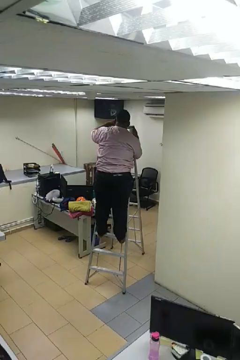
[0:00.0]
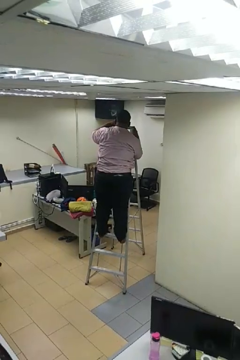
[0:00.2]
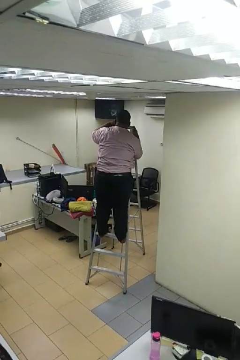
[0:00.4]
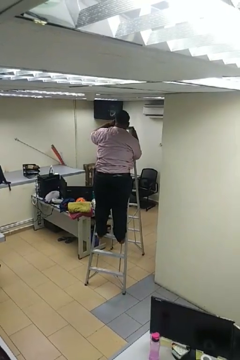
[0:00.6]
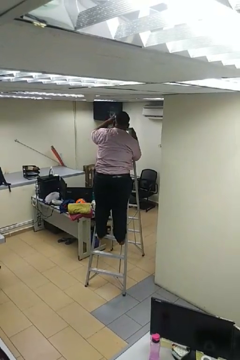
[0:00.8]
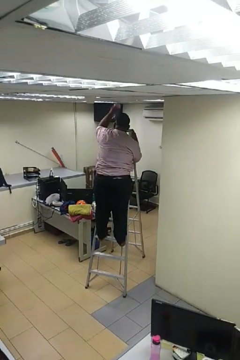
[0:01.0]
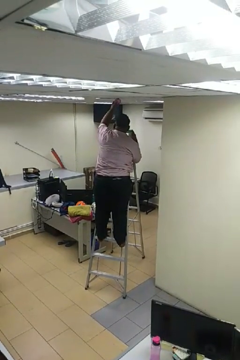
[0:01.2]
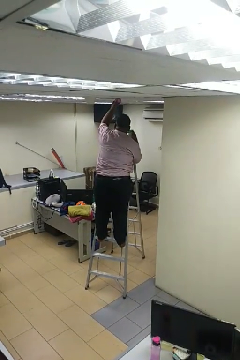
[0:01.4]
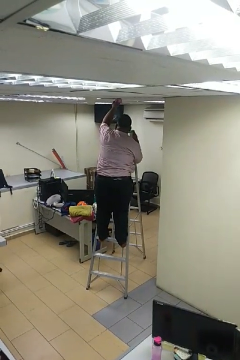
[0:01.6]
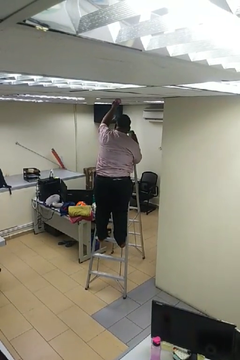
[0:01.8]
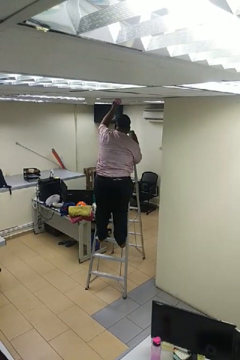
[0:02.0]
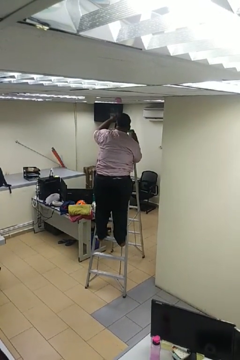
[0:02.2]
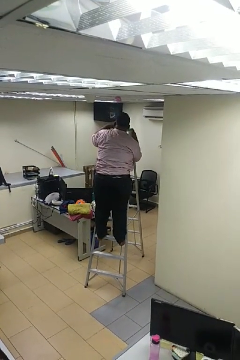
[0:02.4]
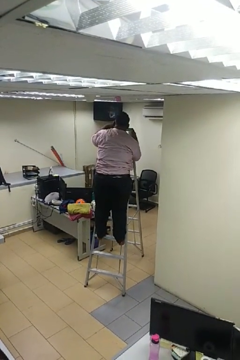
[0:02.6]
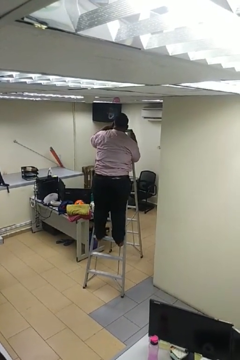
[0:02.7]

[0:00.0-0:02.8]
person puts up smoke detector

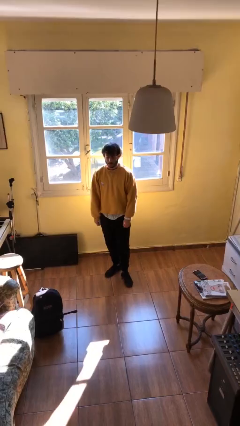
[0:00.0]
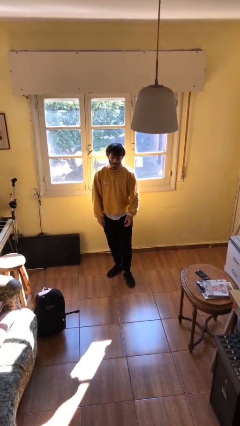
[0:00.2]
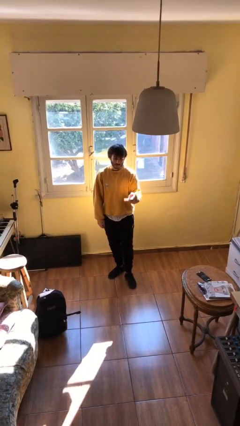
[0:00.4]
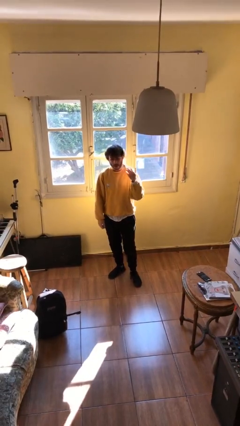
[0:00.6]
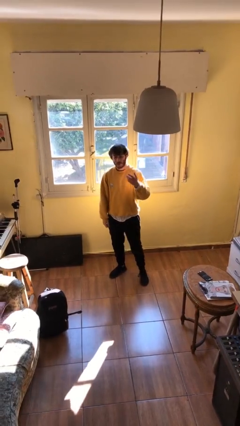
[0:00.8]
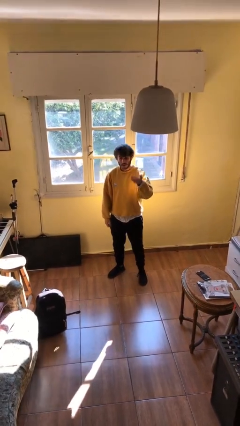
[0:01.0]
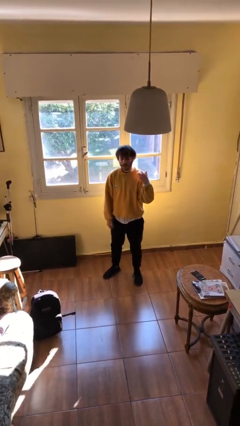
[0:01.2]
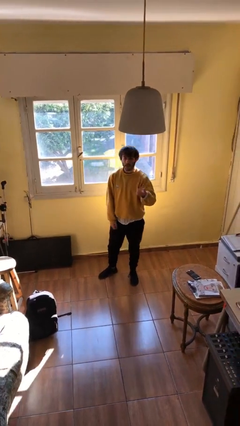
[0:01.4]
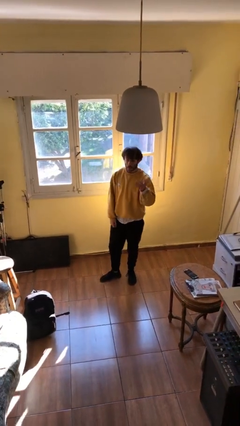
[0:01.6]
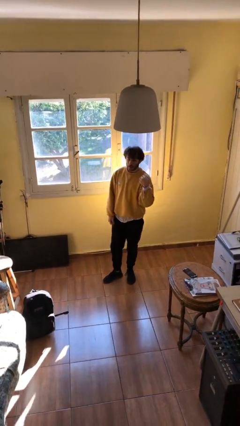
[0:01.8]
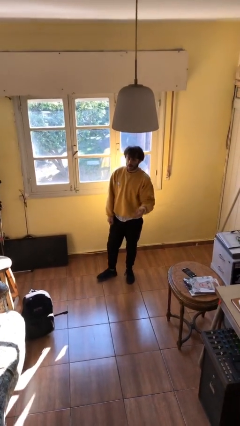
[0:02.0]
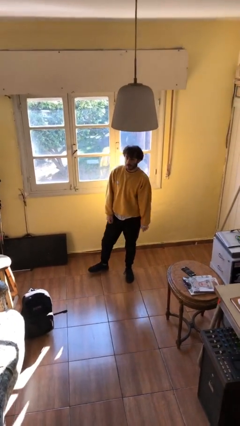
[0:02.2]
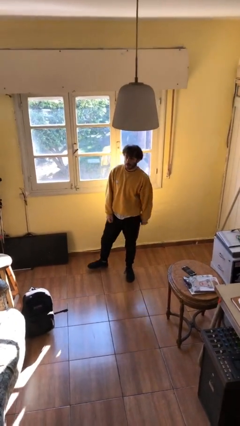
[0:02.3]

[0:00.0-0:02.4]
person gestures come here

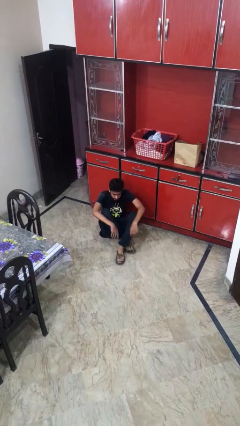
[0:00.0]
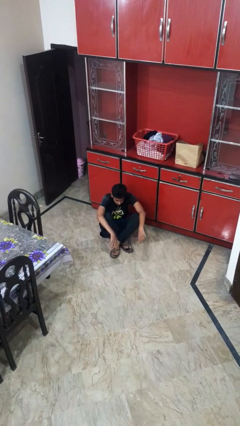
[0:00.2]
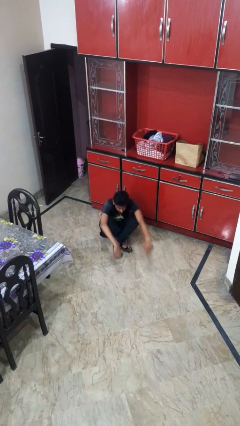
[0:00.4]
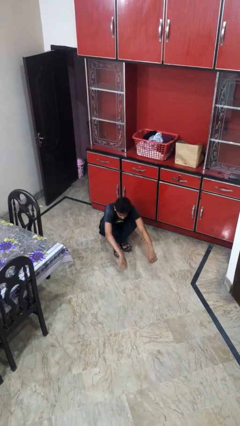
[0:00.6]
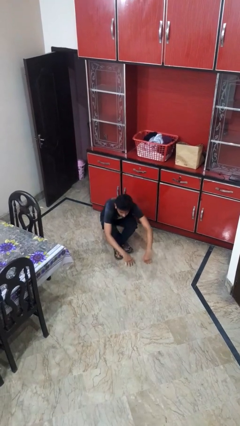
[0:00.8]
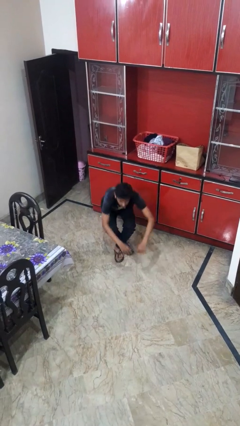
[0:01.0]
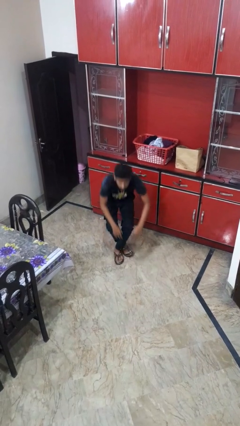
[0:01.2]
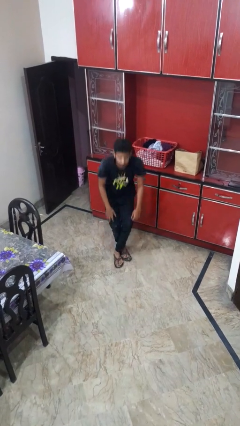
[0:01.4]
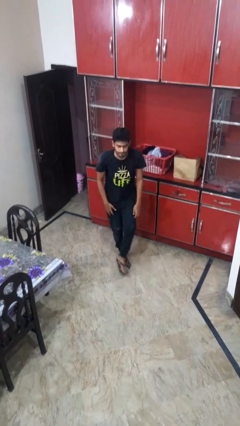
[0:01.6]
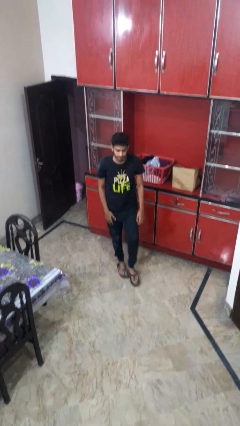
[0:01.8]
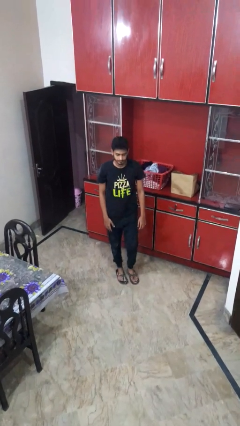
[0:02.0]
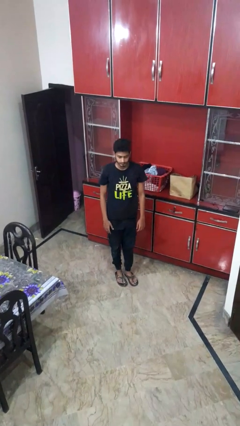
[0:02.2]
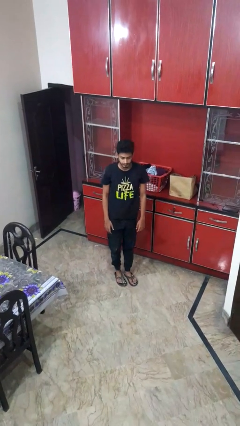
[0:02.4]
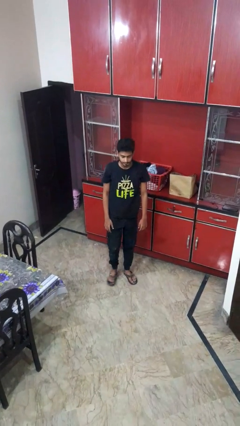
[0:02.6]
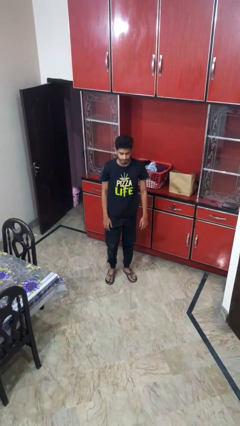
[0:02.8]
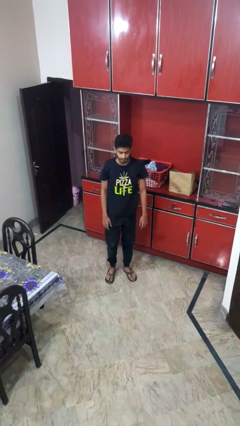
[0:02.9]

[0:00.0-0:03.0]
person stands up from floor

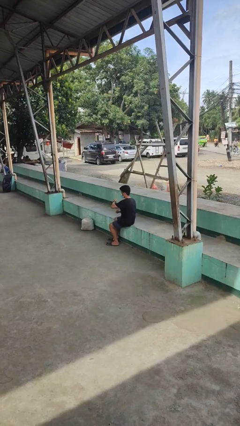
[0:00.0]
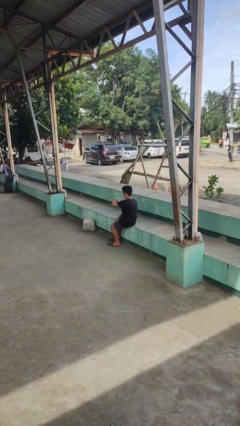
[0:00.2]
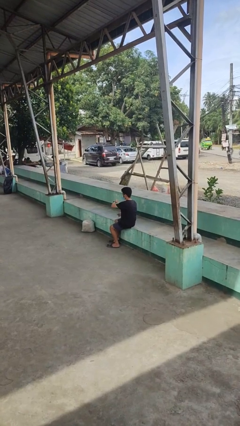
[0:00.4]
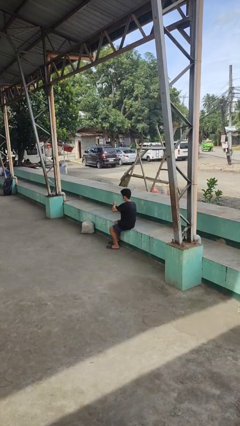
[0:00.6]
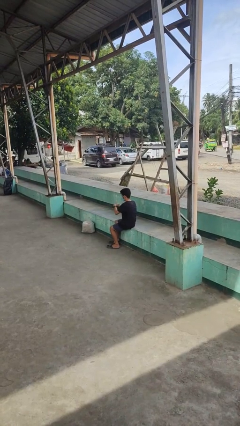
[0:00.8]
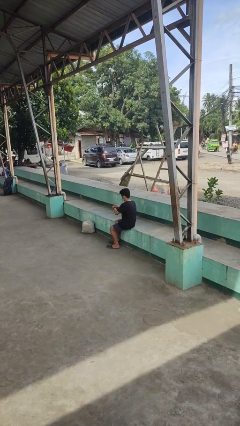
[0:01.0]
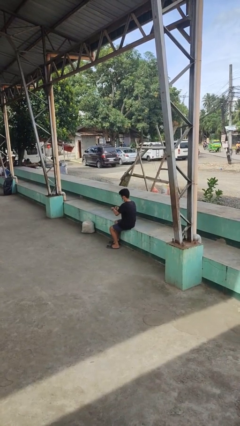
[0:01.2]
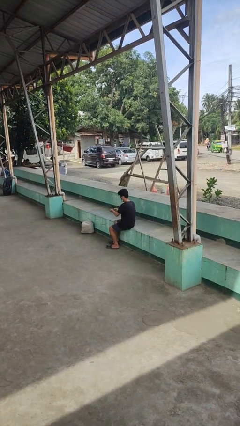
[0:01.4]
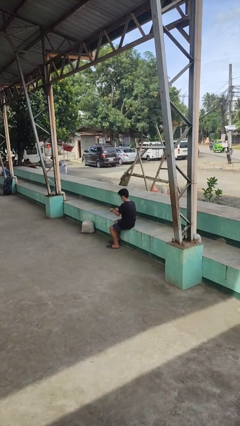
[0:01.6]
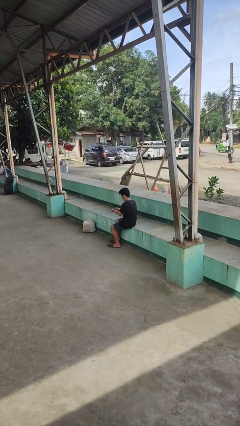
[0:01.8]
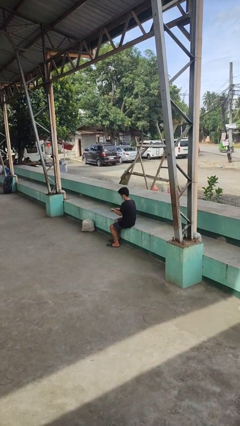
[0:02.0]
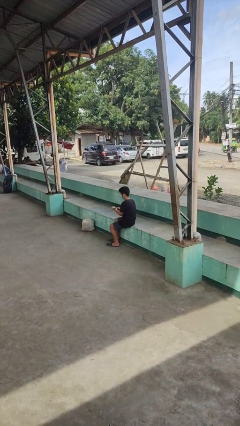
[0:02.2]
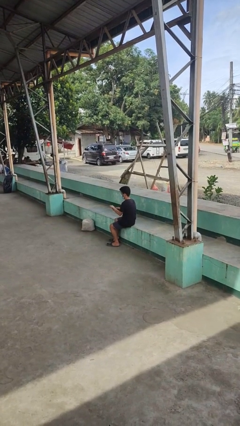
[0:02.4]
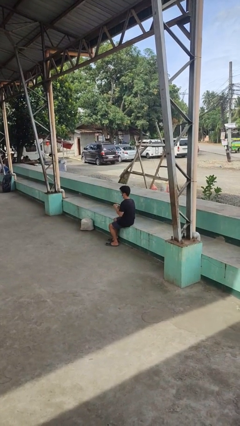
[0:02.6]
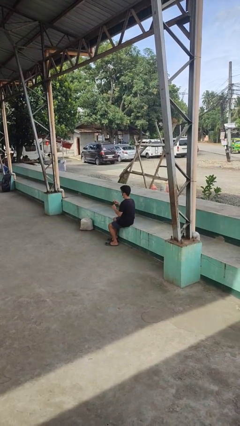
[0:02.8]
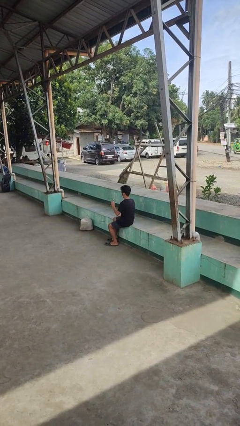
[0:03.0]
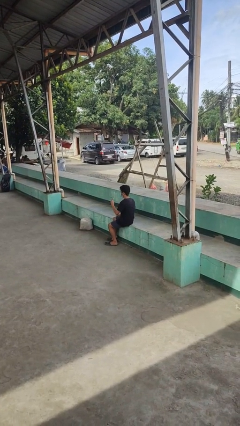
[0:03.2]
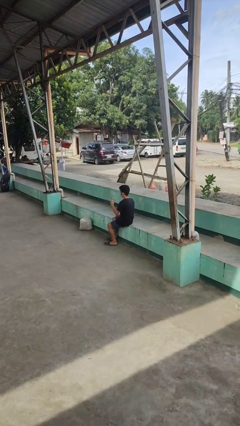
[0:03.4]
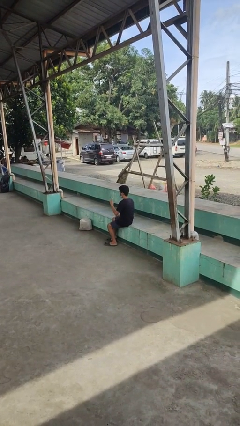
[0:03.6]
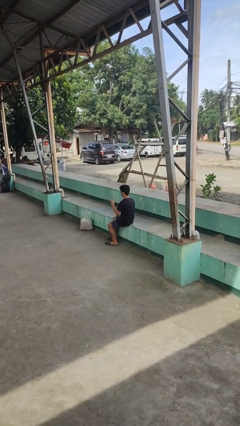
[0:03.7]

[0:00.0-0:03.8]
person takes off wristwatch

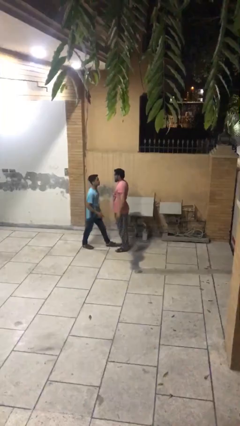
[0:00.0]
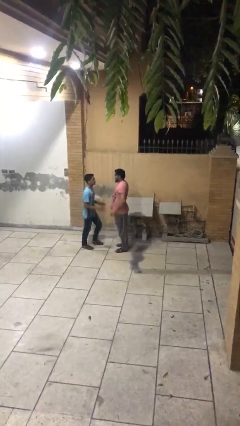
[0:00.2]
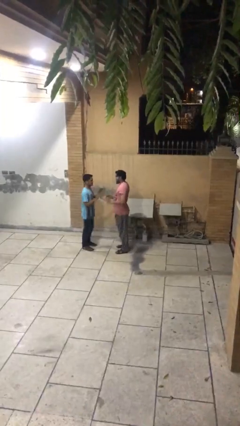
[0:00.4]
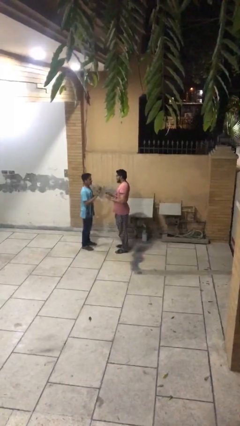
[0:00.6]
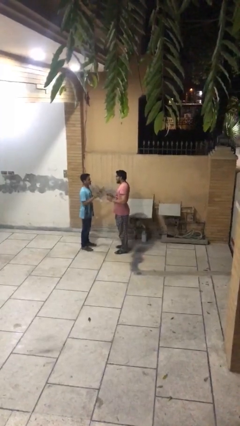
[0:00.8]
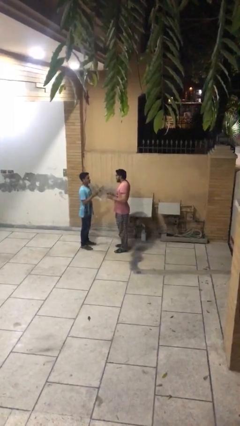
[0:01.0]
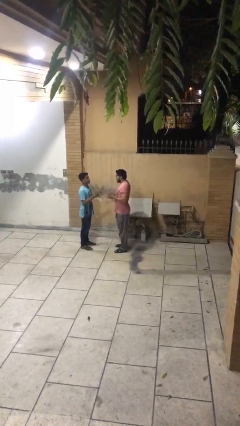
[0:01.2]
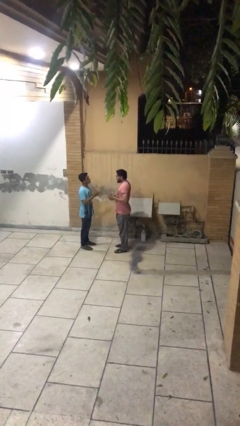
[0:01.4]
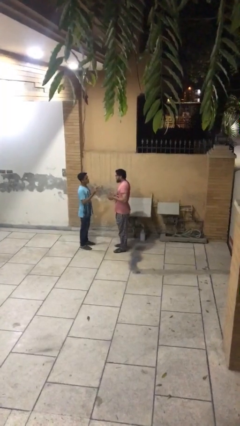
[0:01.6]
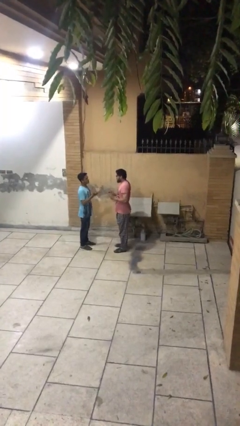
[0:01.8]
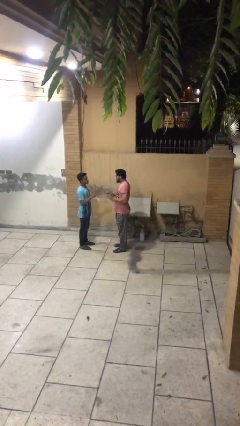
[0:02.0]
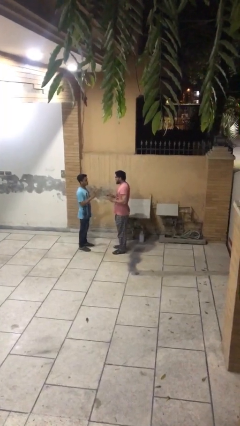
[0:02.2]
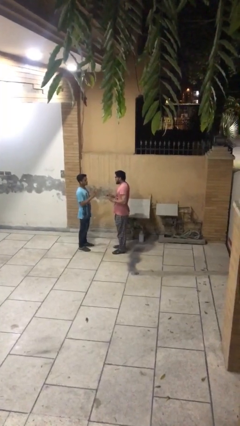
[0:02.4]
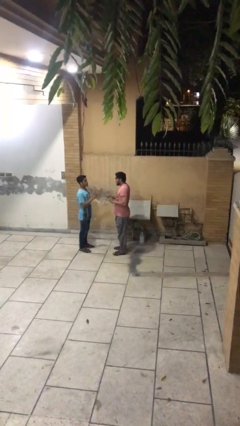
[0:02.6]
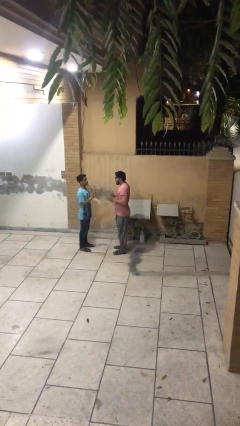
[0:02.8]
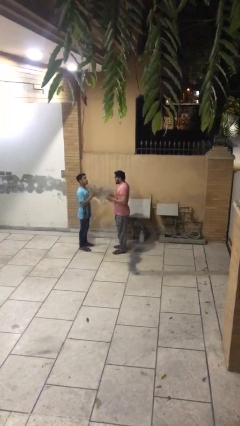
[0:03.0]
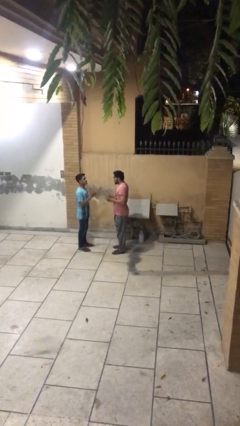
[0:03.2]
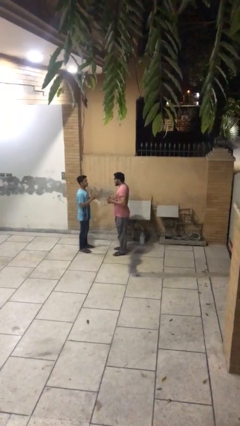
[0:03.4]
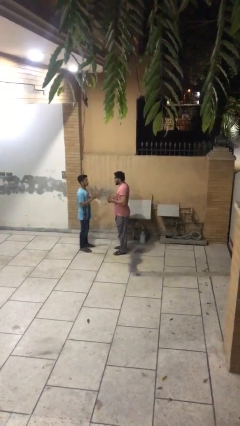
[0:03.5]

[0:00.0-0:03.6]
person talks to person

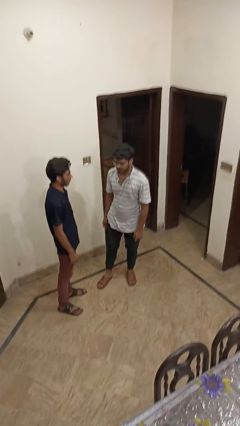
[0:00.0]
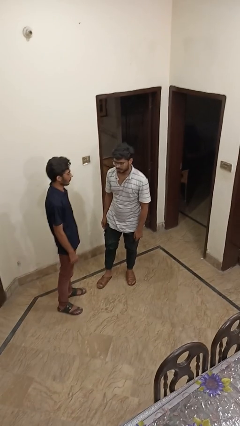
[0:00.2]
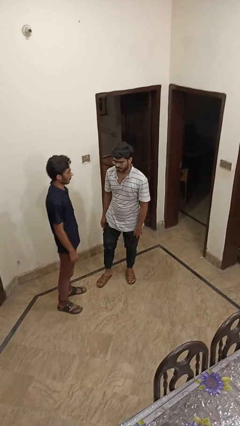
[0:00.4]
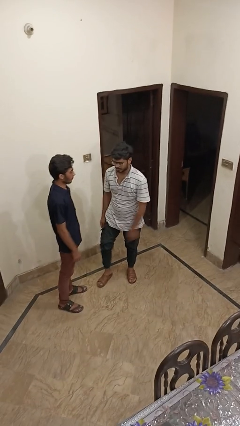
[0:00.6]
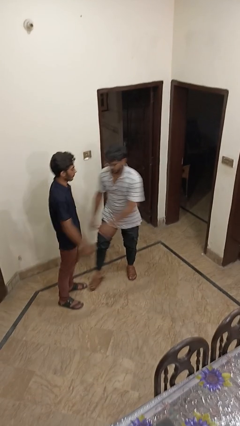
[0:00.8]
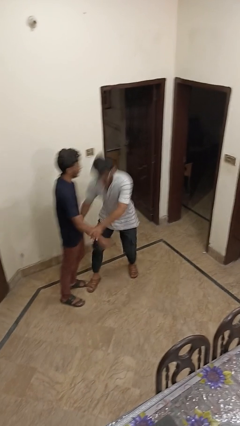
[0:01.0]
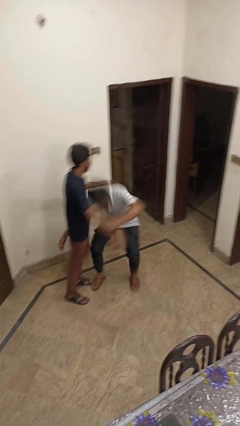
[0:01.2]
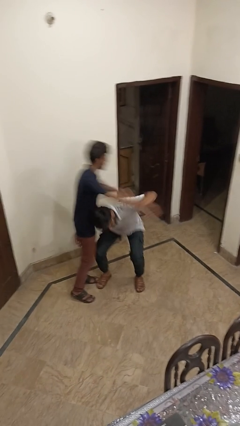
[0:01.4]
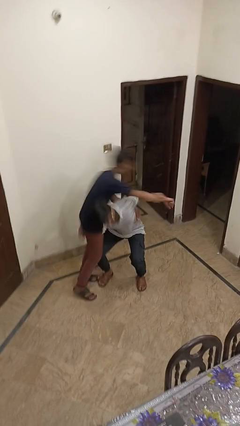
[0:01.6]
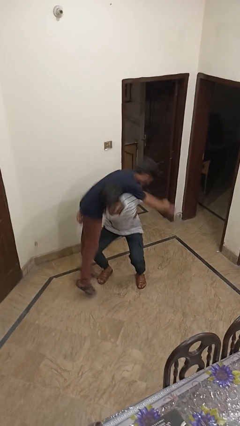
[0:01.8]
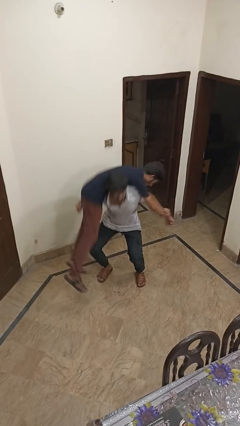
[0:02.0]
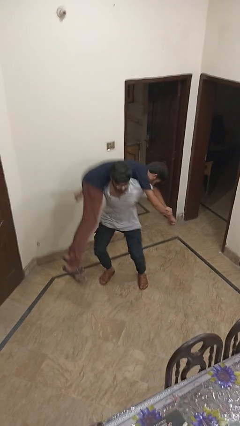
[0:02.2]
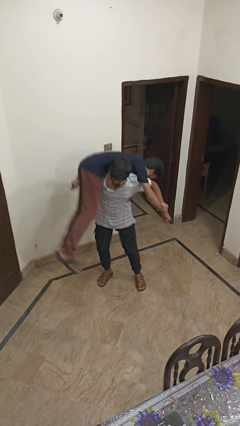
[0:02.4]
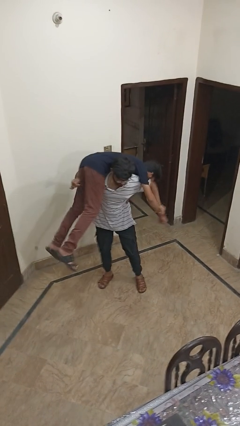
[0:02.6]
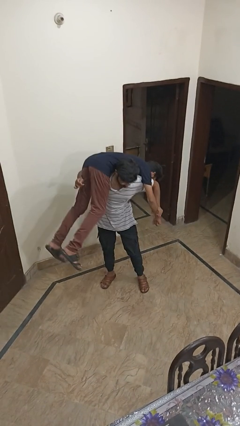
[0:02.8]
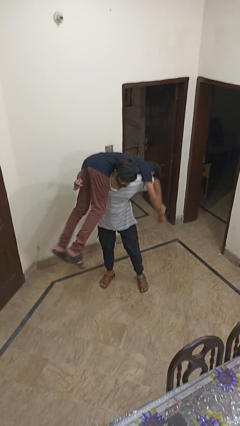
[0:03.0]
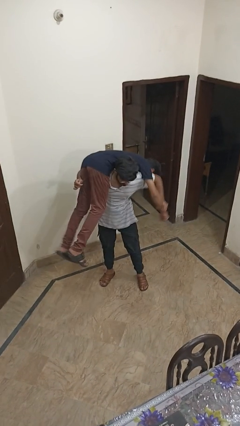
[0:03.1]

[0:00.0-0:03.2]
person carries person over shoulder
